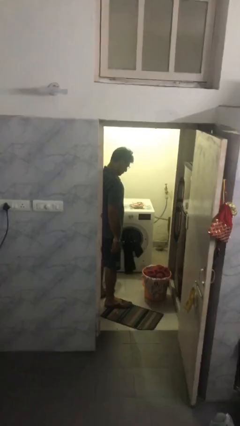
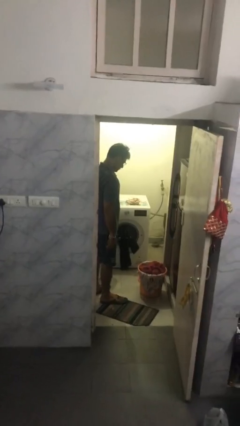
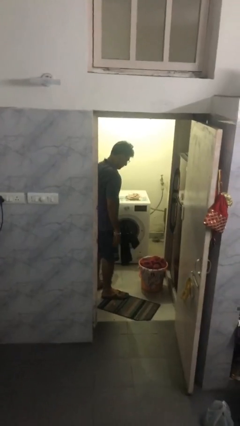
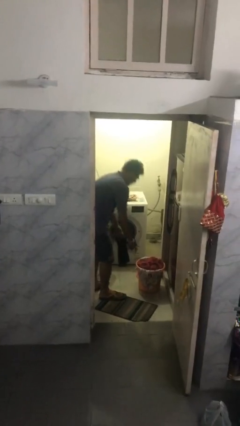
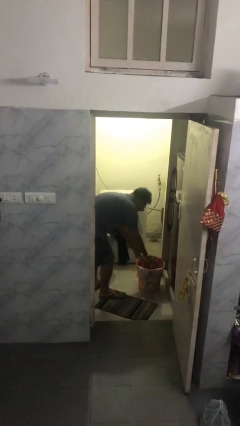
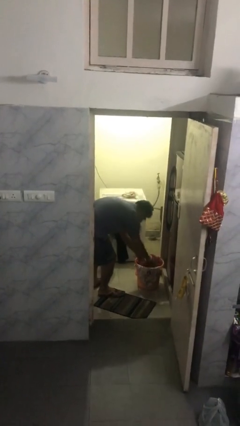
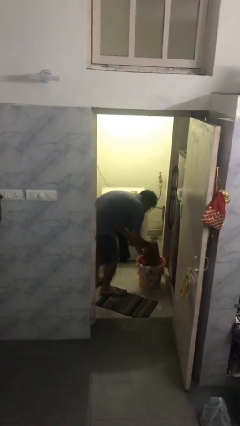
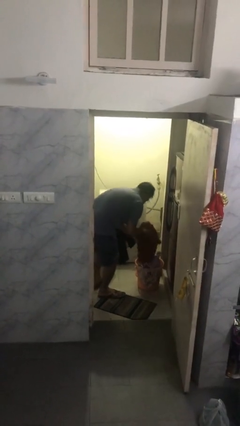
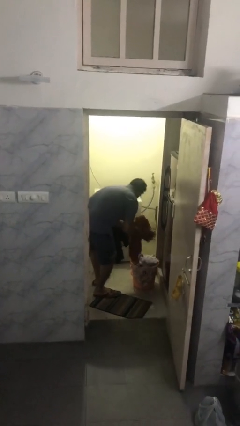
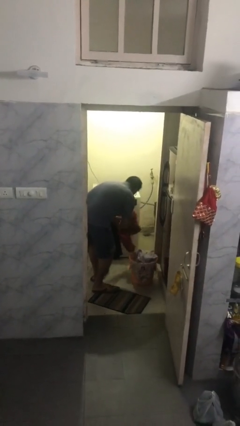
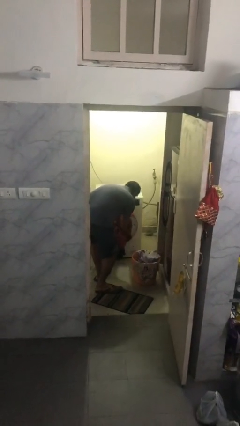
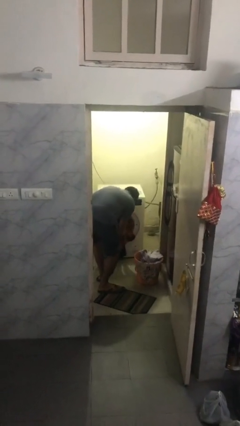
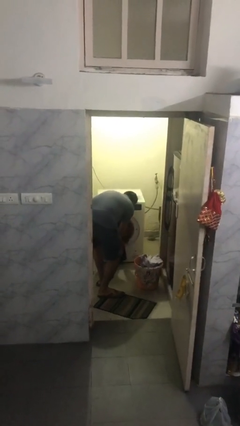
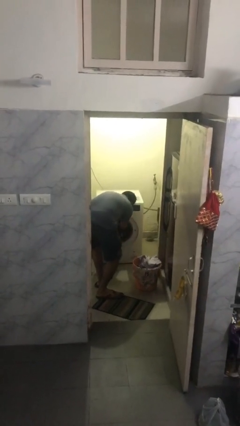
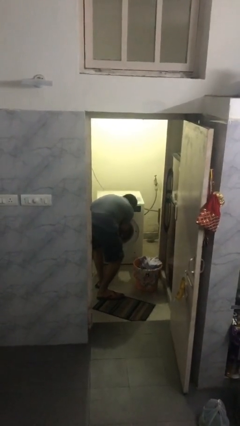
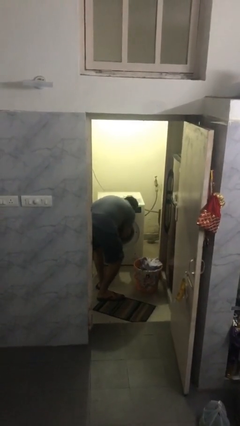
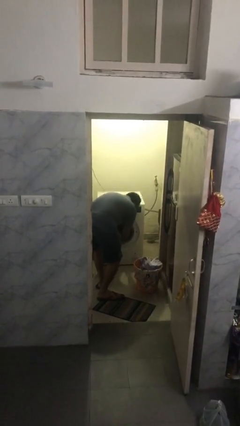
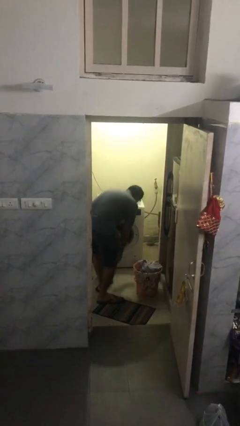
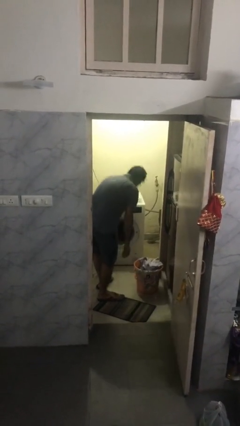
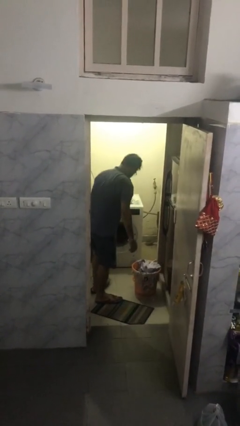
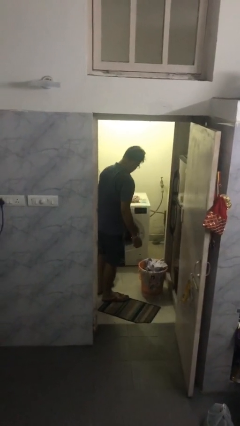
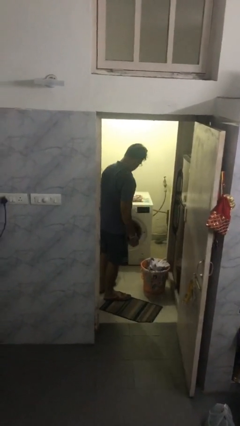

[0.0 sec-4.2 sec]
person loads dryer

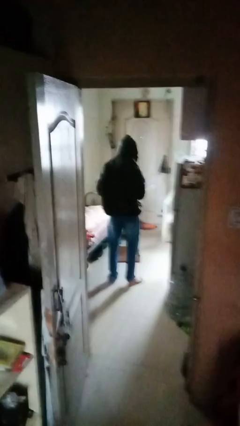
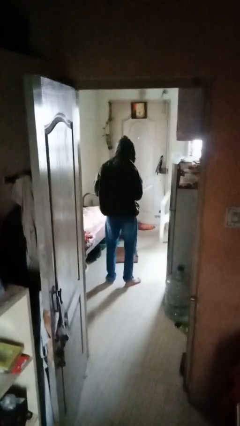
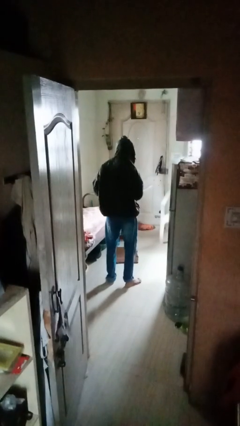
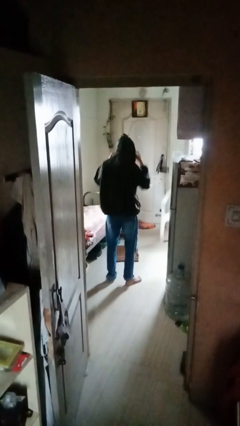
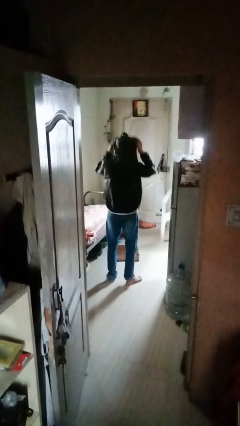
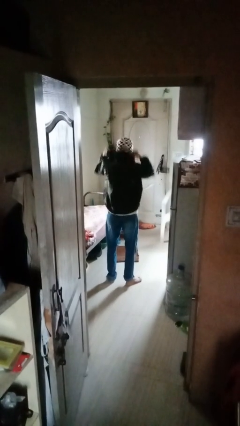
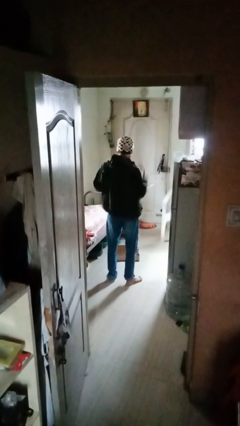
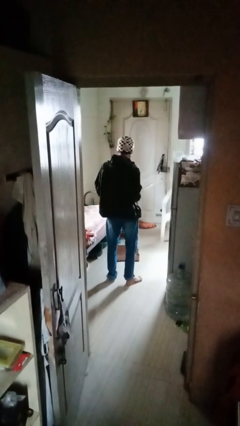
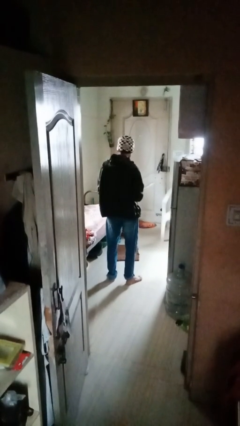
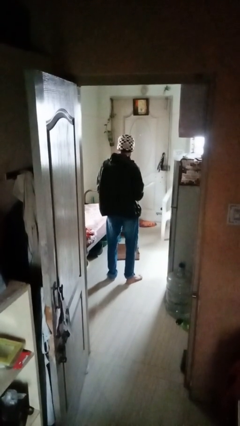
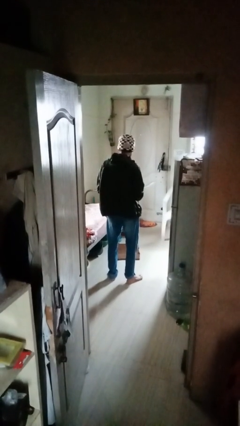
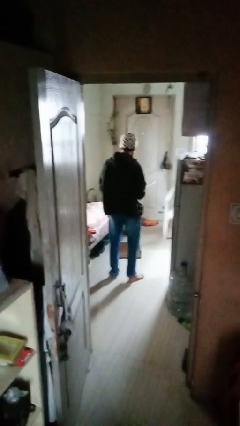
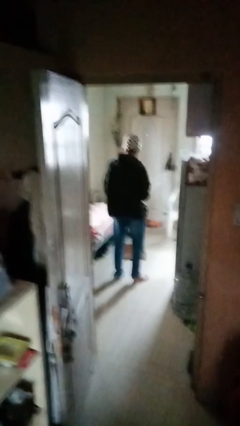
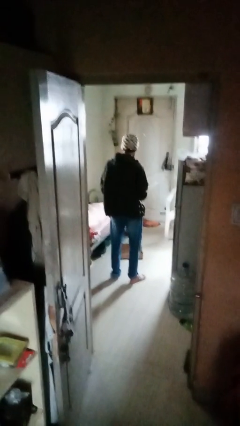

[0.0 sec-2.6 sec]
person takes off hoodie

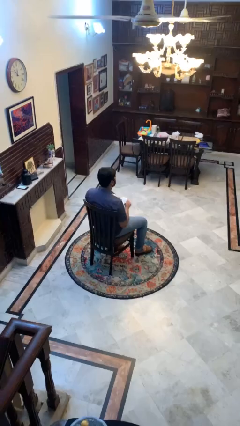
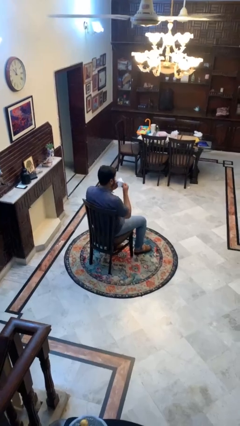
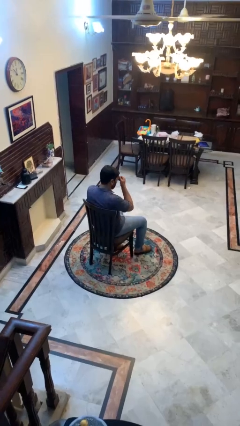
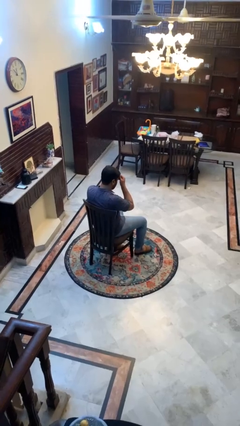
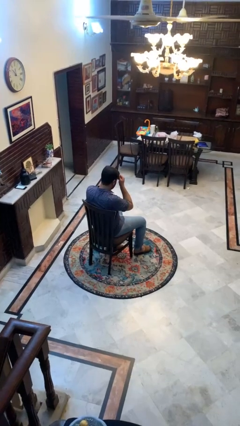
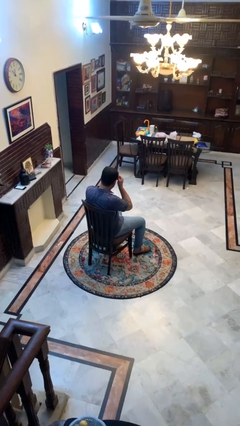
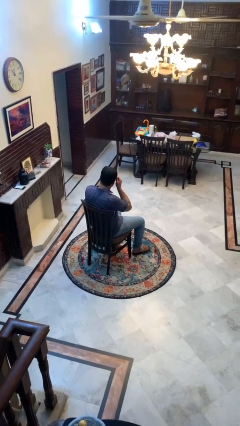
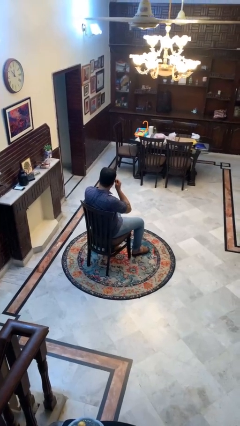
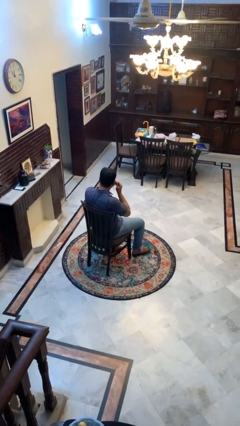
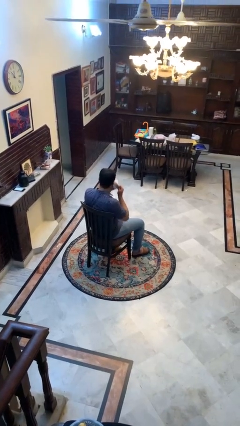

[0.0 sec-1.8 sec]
person wipes mouth with napkin

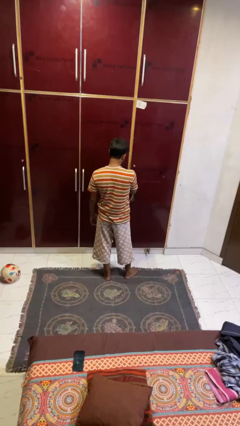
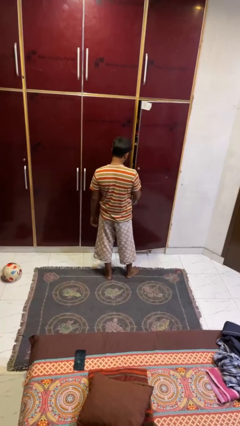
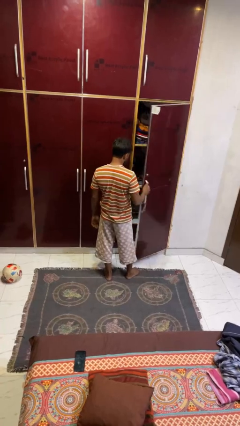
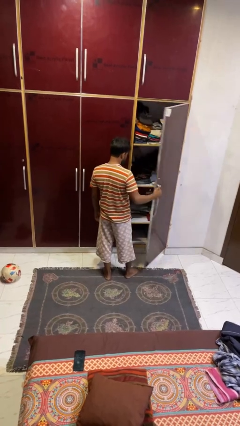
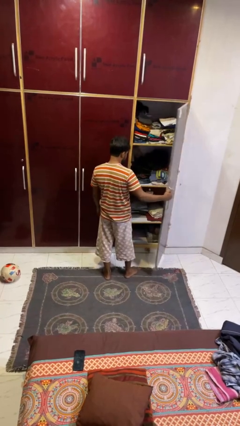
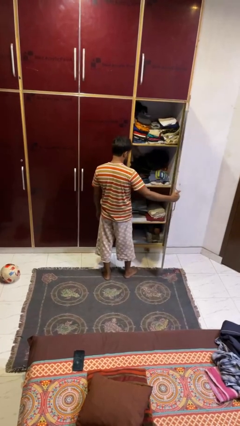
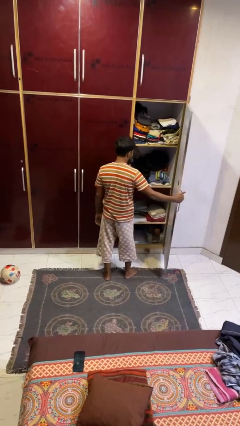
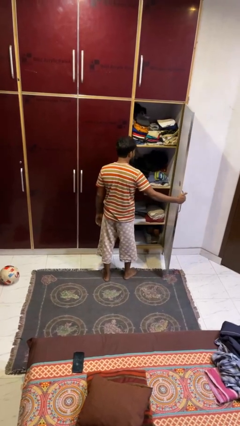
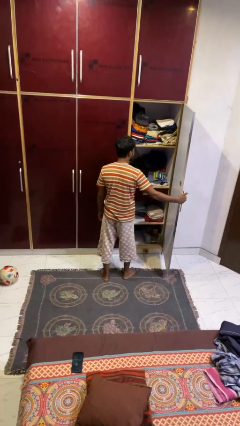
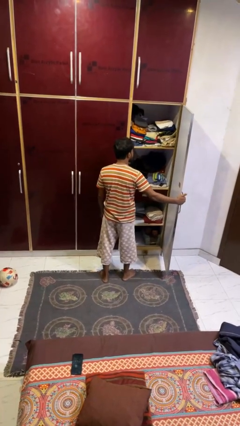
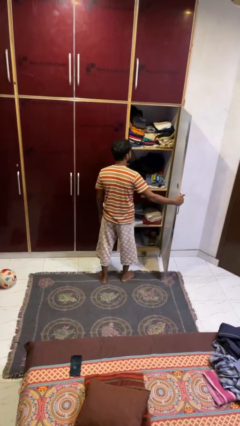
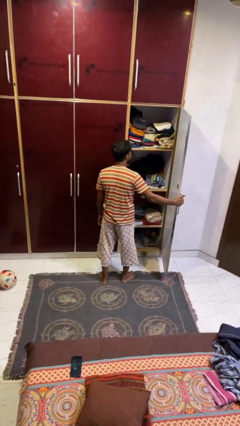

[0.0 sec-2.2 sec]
person opens closet door

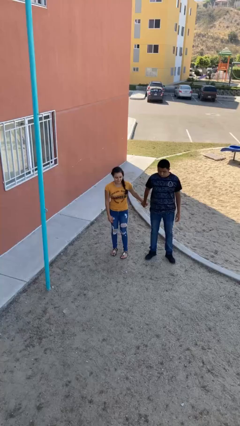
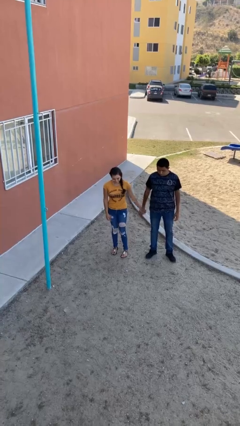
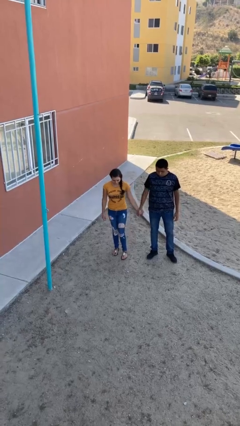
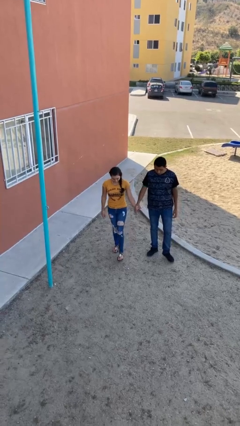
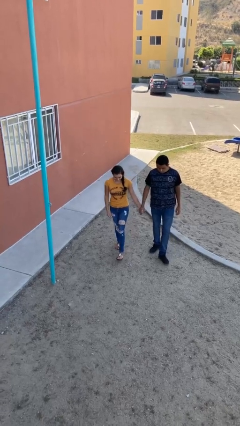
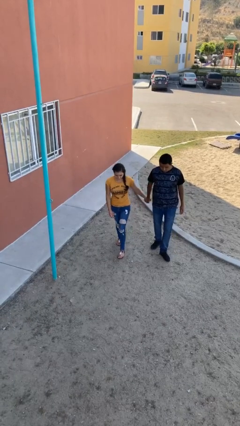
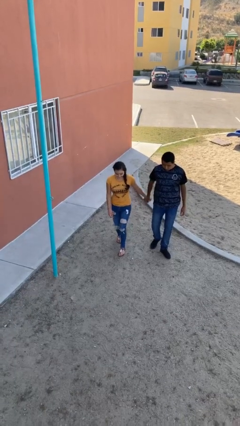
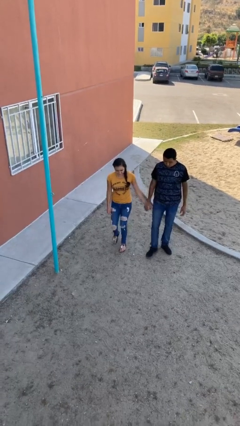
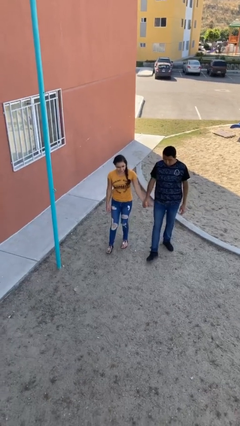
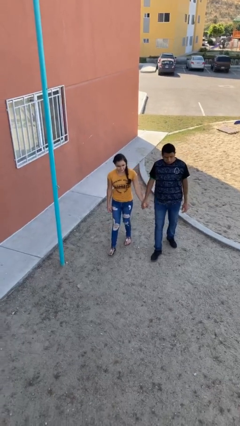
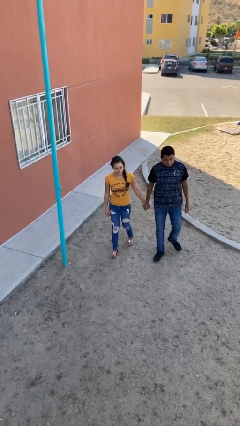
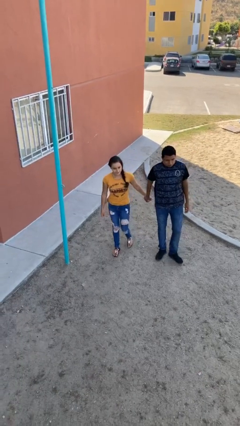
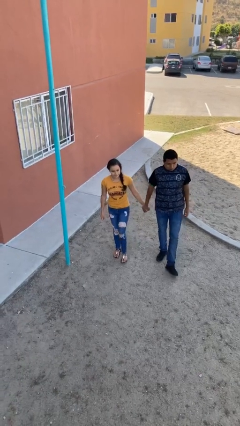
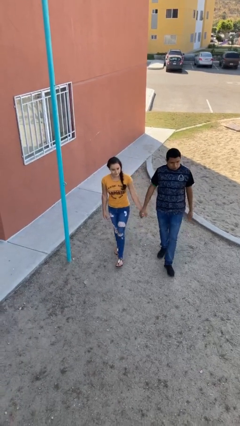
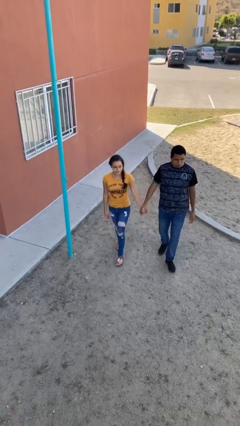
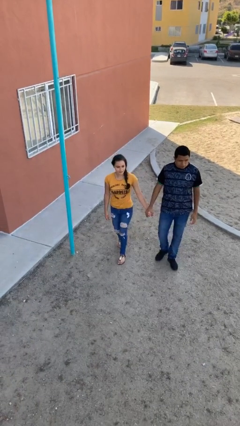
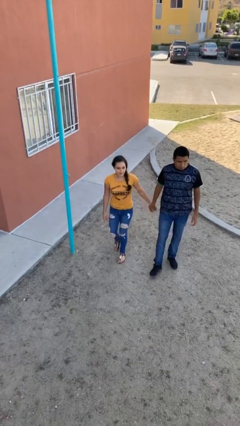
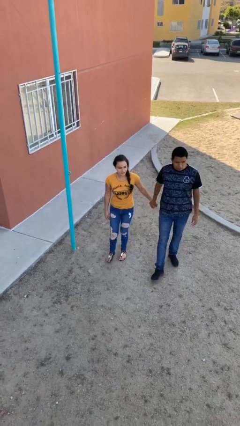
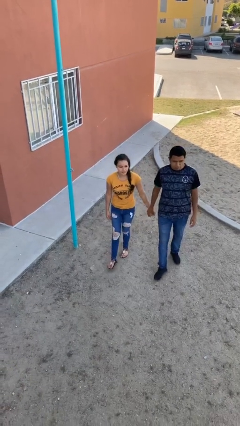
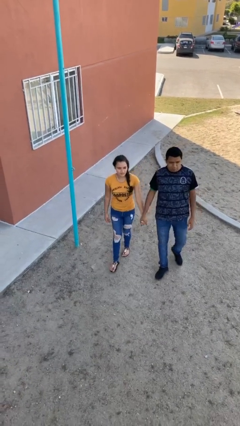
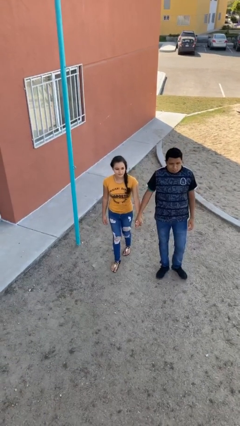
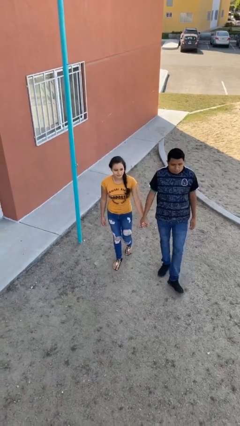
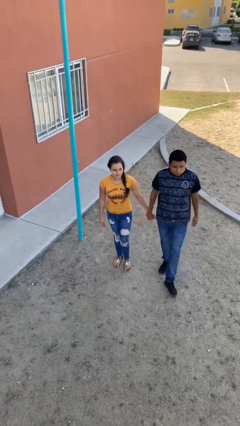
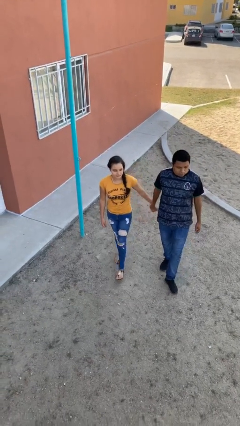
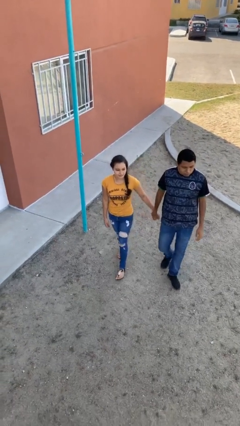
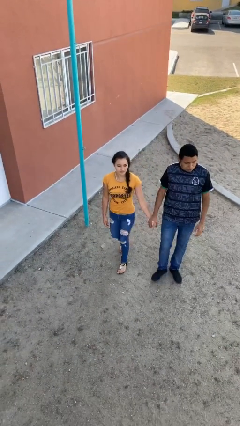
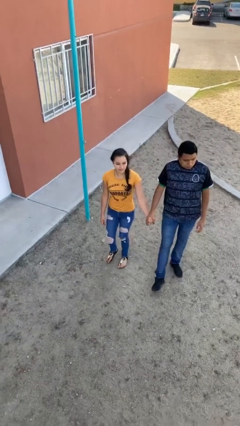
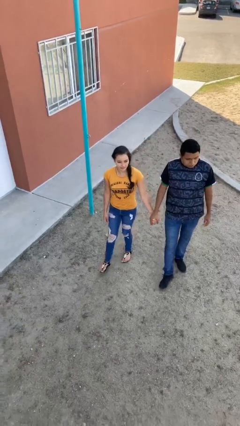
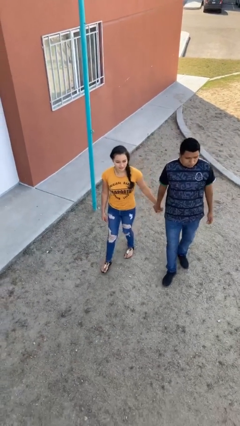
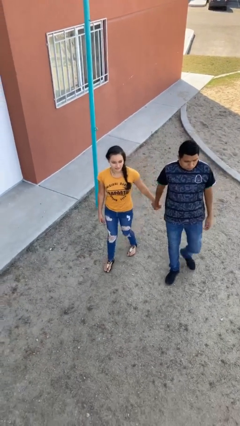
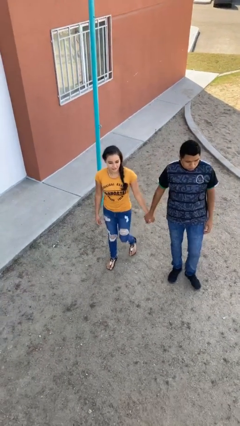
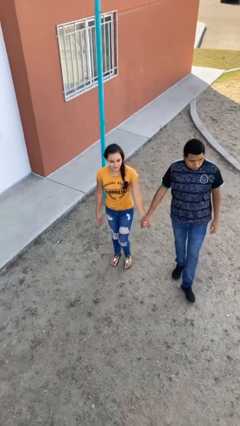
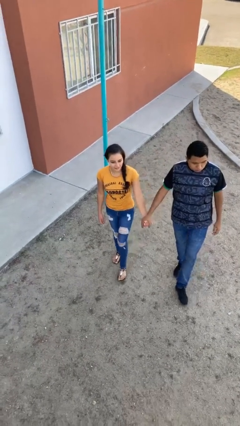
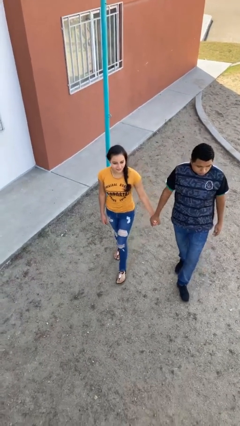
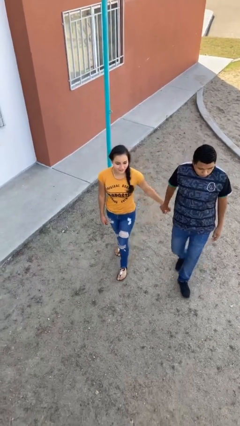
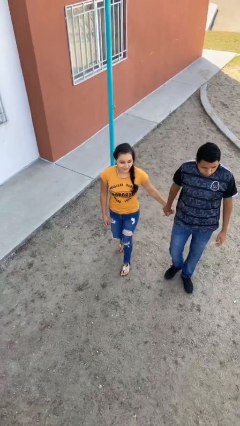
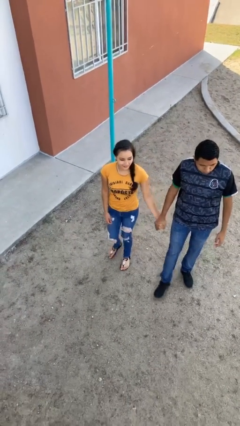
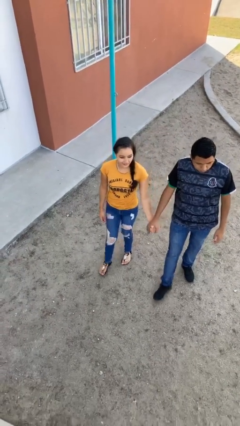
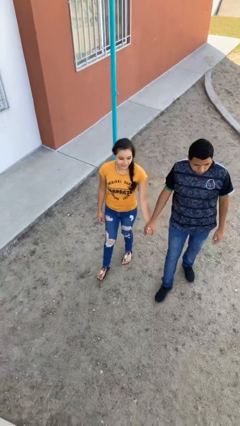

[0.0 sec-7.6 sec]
person holds hand
